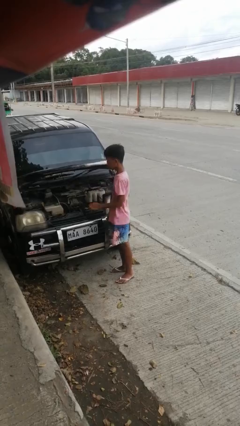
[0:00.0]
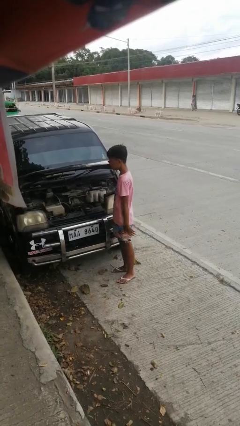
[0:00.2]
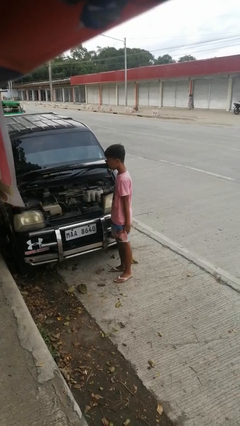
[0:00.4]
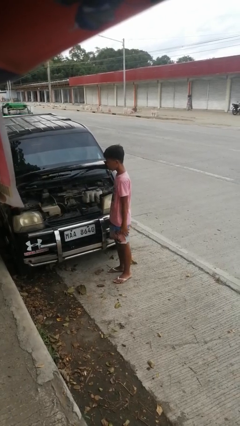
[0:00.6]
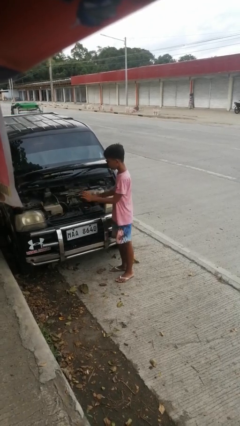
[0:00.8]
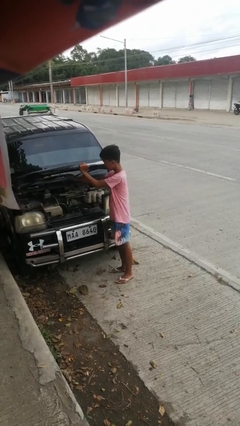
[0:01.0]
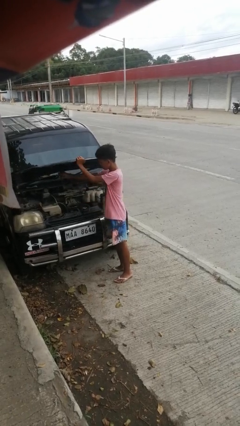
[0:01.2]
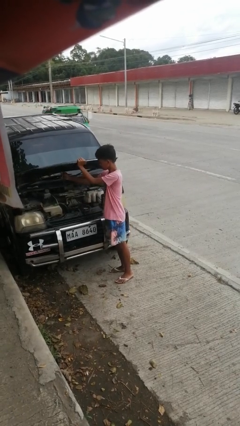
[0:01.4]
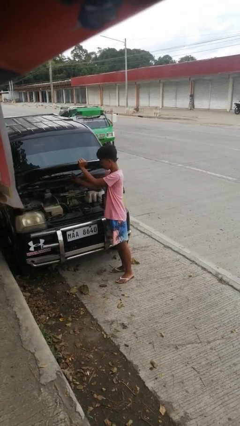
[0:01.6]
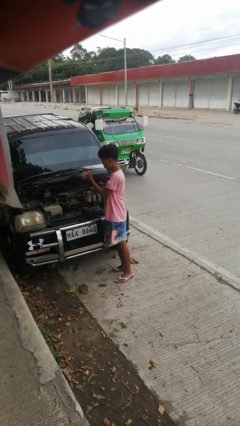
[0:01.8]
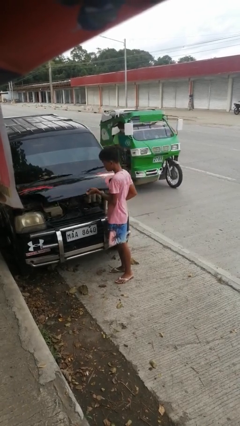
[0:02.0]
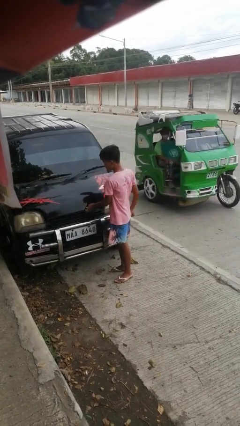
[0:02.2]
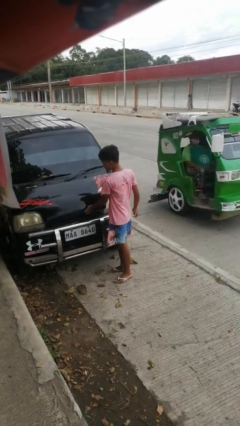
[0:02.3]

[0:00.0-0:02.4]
person closes car hood

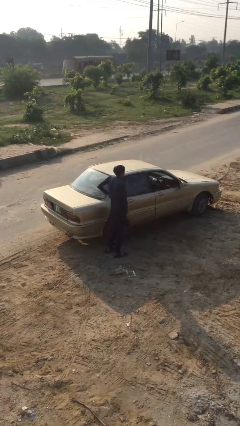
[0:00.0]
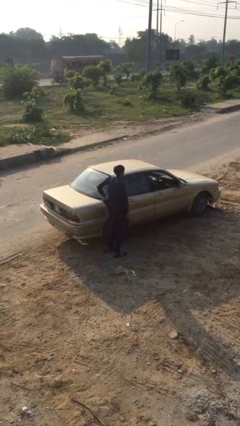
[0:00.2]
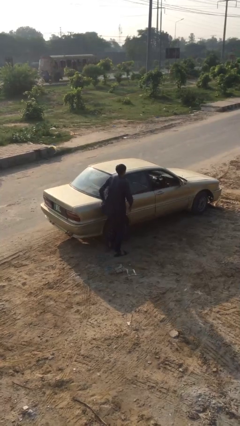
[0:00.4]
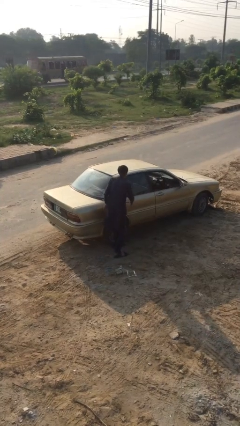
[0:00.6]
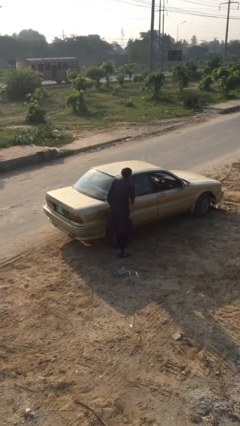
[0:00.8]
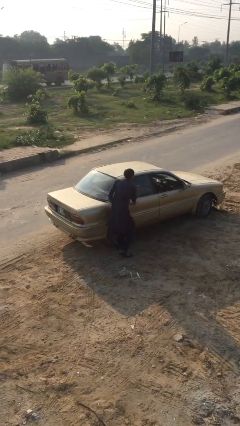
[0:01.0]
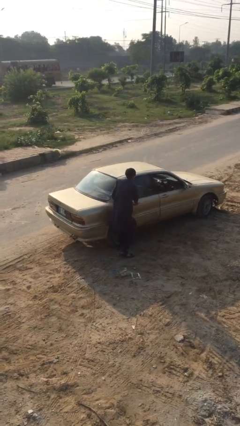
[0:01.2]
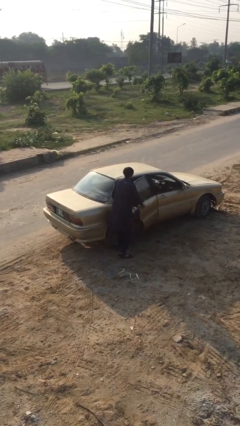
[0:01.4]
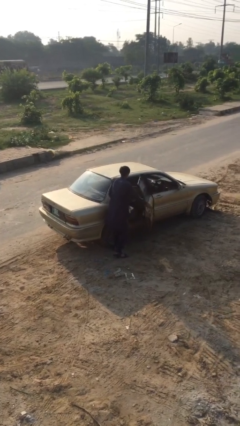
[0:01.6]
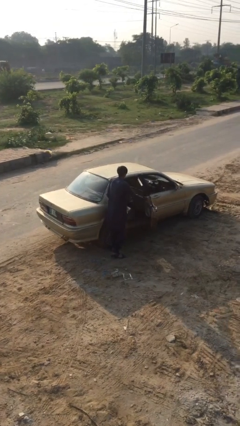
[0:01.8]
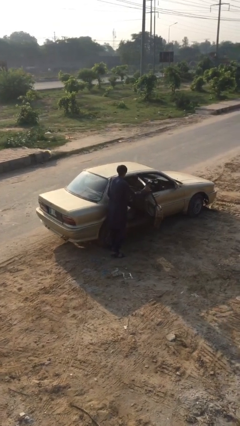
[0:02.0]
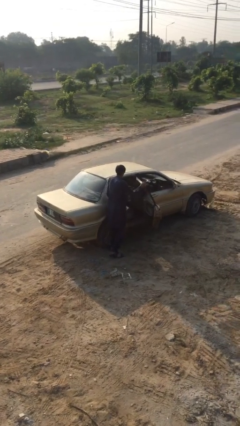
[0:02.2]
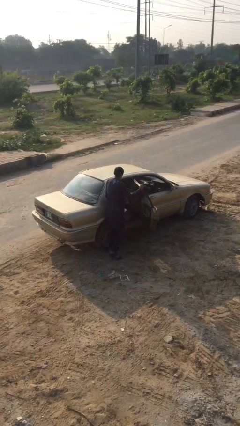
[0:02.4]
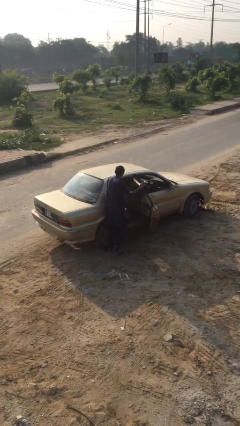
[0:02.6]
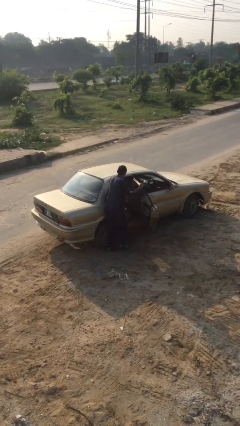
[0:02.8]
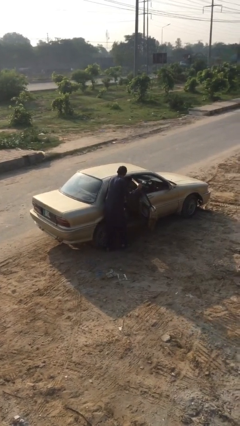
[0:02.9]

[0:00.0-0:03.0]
person opens car door

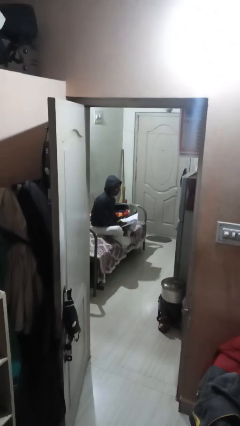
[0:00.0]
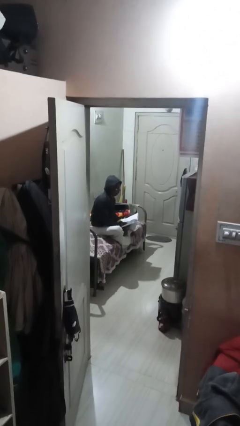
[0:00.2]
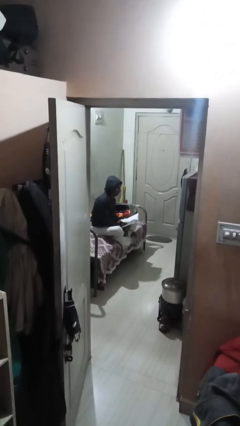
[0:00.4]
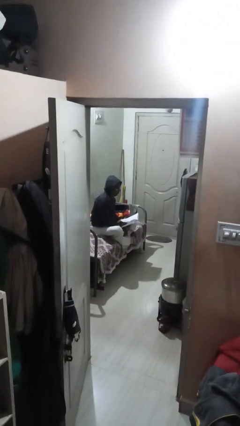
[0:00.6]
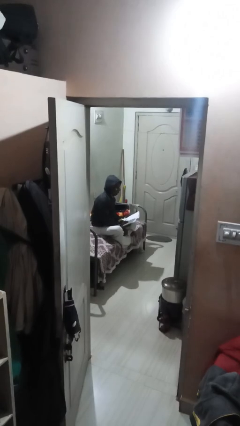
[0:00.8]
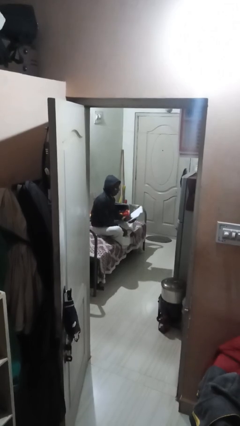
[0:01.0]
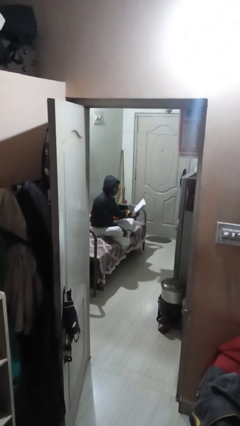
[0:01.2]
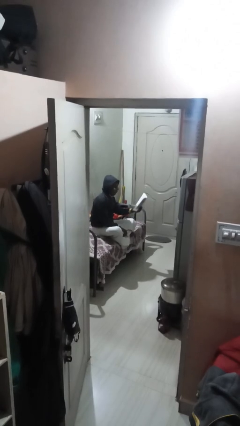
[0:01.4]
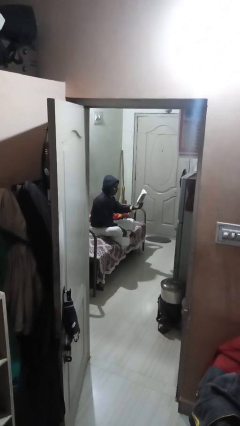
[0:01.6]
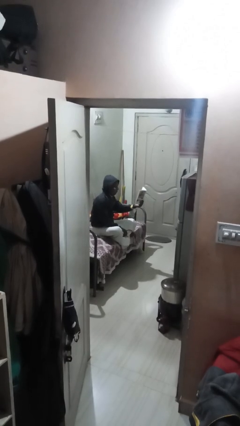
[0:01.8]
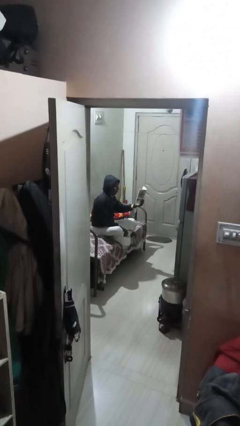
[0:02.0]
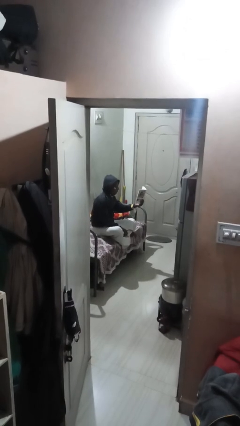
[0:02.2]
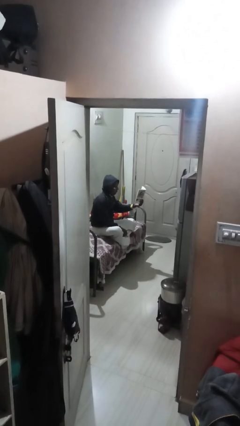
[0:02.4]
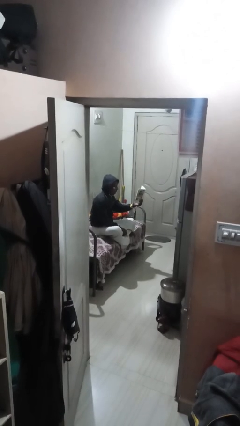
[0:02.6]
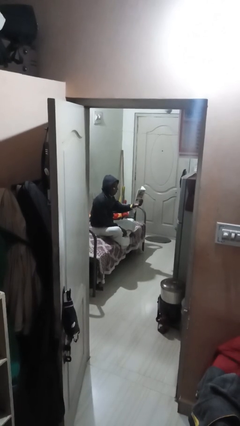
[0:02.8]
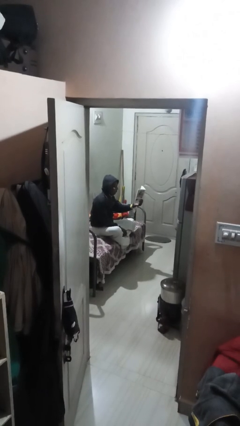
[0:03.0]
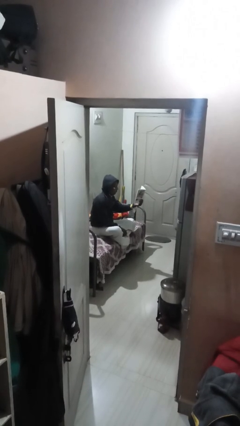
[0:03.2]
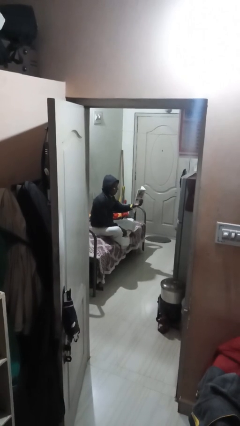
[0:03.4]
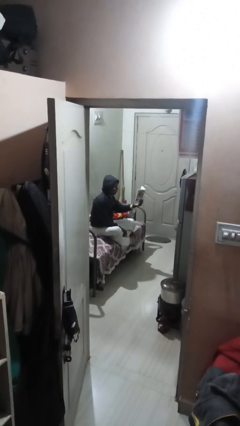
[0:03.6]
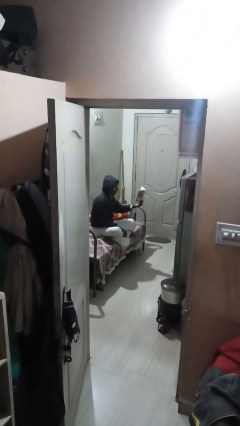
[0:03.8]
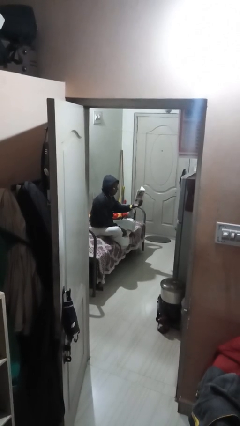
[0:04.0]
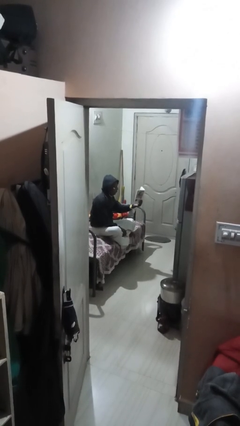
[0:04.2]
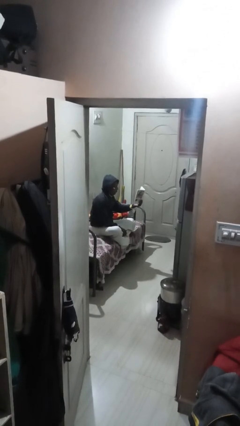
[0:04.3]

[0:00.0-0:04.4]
person reads document

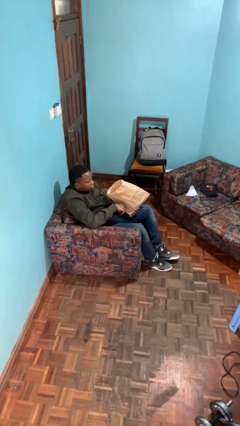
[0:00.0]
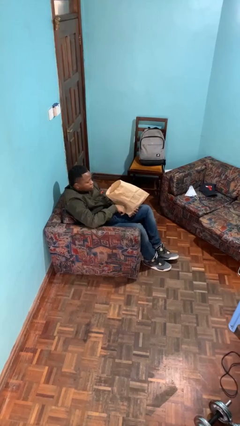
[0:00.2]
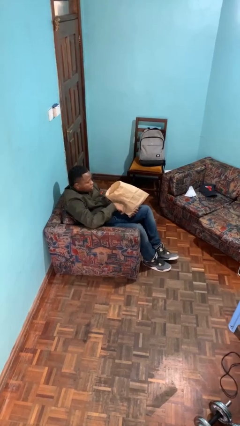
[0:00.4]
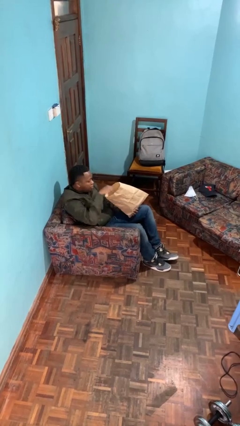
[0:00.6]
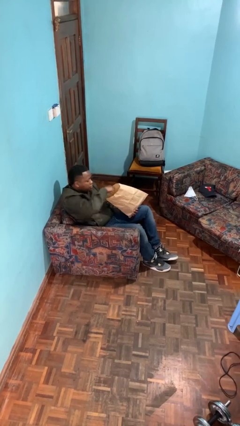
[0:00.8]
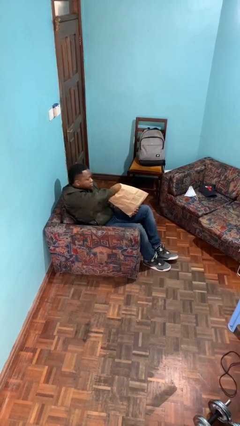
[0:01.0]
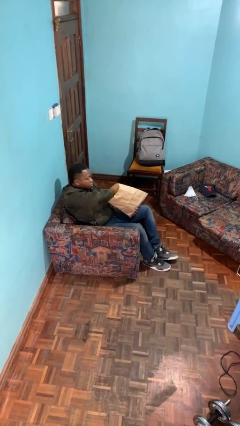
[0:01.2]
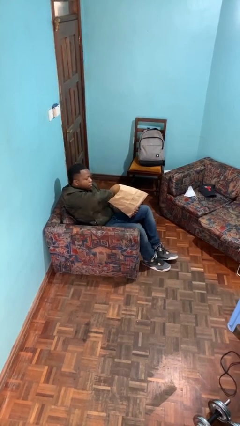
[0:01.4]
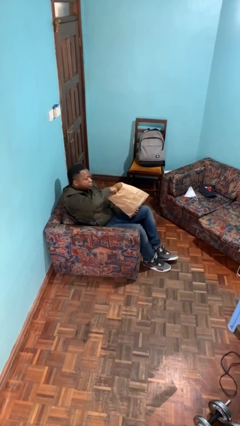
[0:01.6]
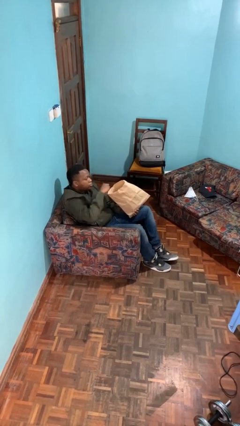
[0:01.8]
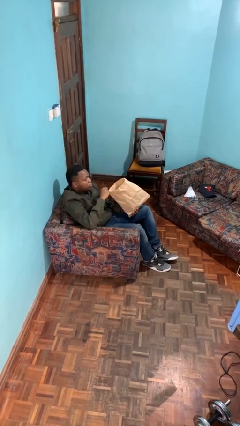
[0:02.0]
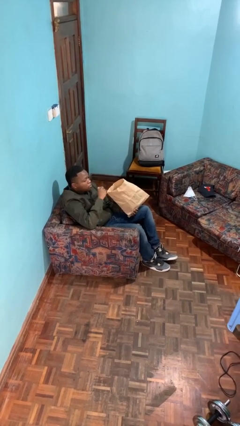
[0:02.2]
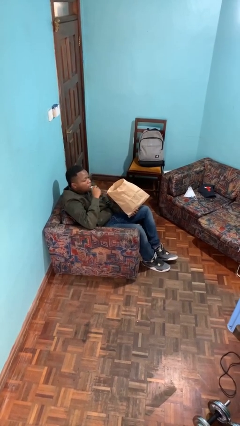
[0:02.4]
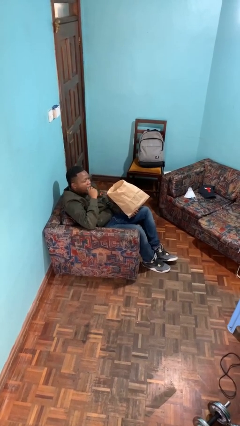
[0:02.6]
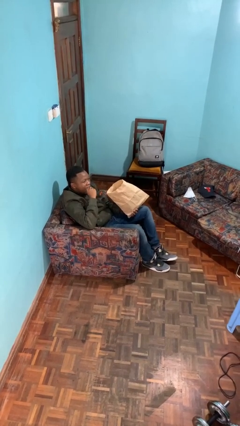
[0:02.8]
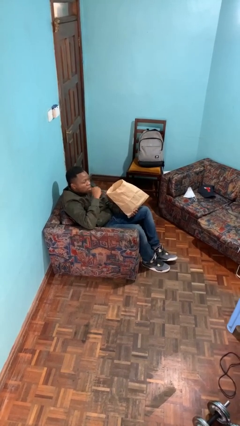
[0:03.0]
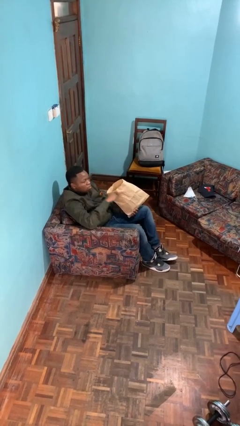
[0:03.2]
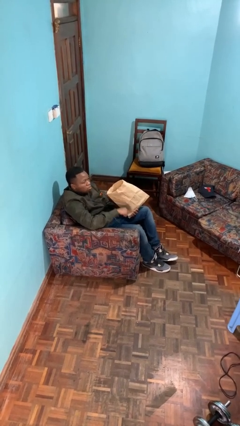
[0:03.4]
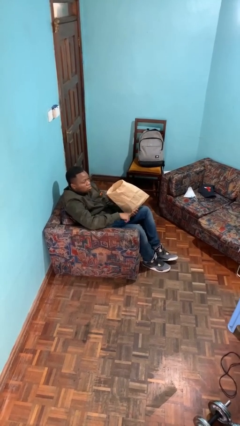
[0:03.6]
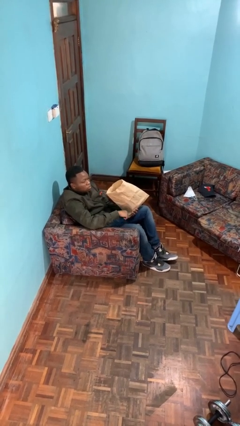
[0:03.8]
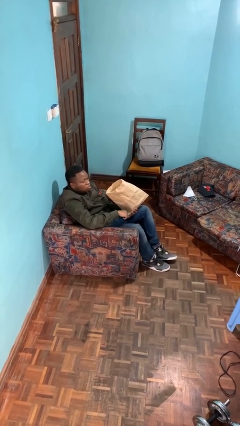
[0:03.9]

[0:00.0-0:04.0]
person eats snack from bag

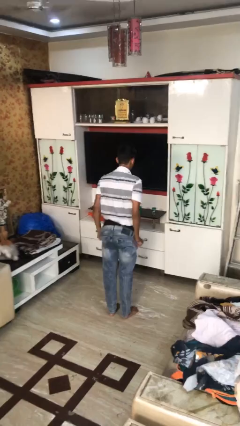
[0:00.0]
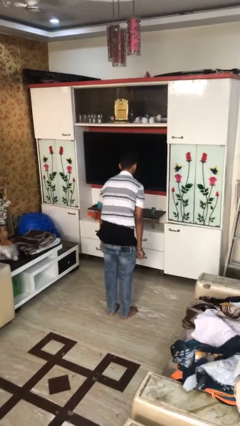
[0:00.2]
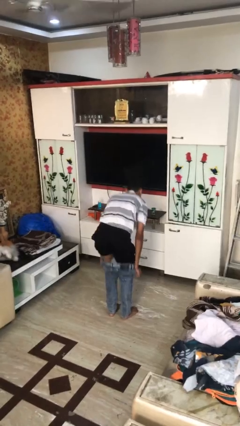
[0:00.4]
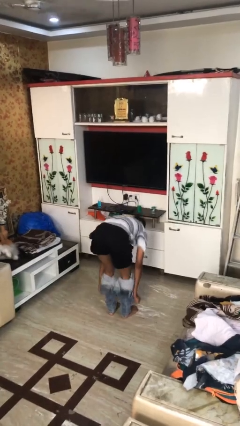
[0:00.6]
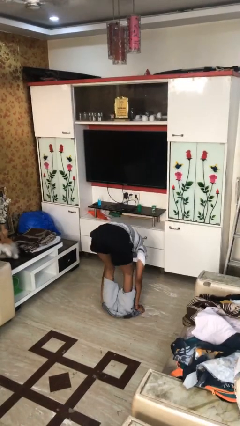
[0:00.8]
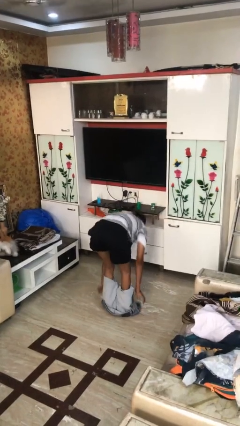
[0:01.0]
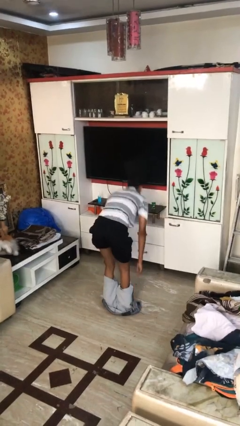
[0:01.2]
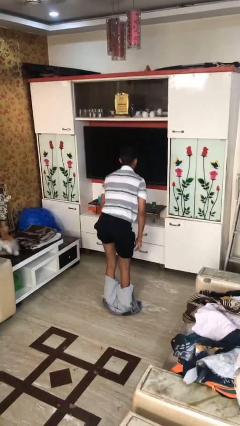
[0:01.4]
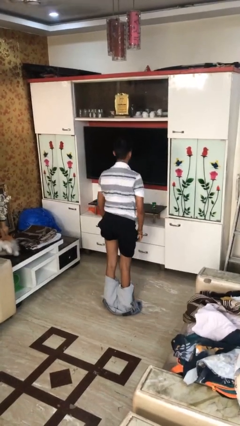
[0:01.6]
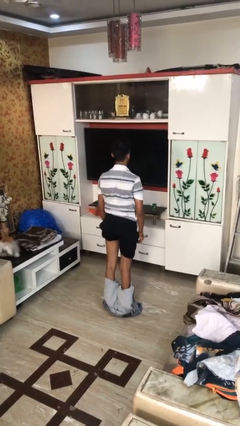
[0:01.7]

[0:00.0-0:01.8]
person takes off pants

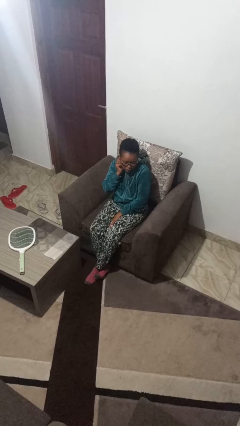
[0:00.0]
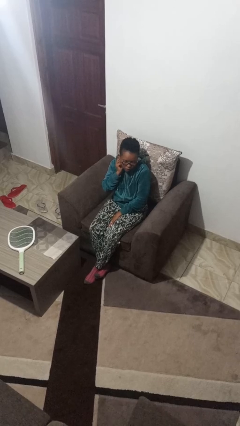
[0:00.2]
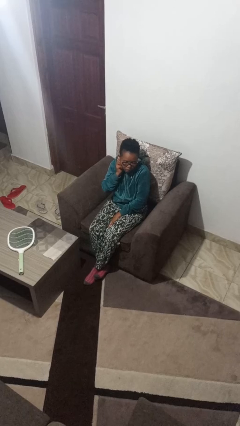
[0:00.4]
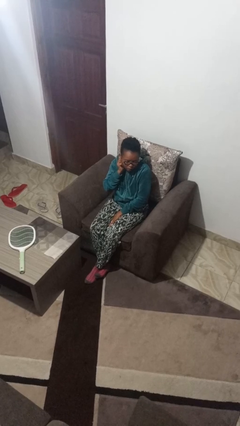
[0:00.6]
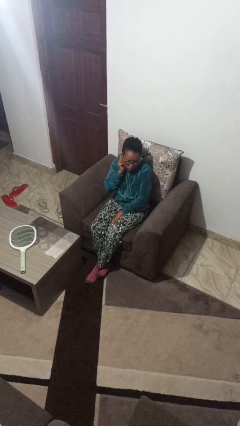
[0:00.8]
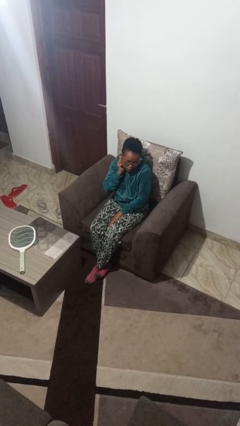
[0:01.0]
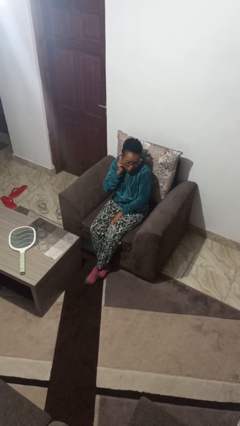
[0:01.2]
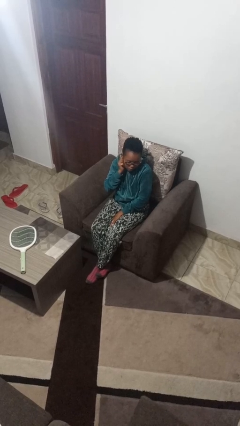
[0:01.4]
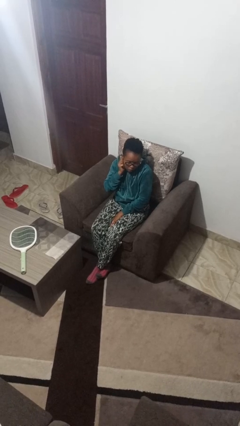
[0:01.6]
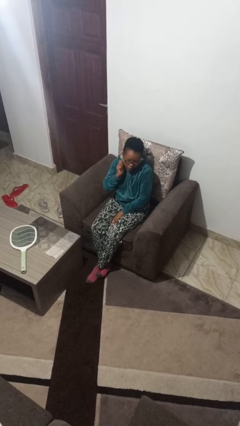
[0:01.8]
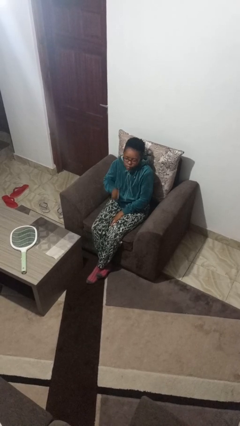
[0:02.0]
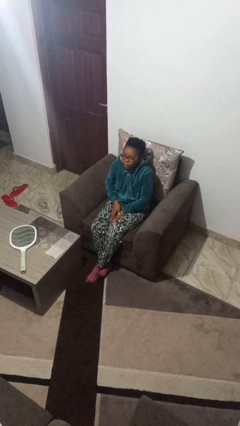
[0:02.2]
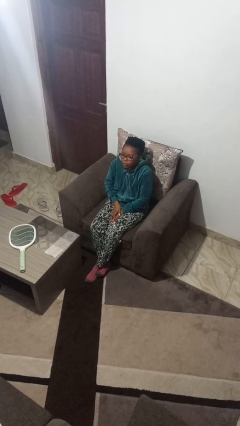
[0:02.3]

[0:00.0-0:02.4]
person touches earlobe
